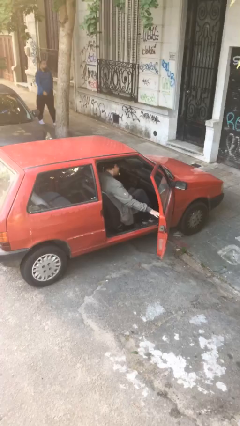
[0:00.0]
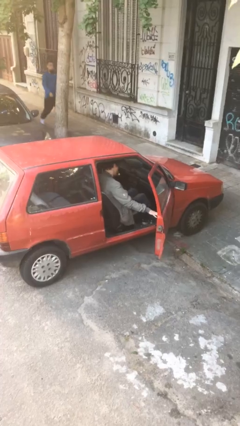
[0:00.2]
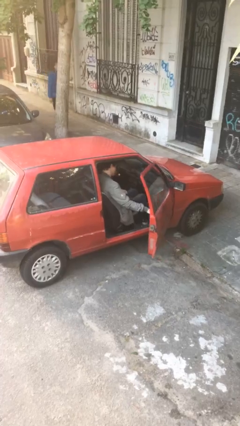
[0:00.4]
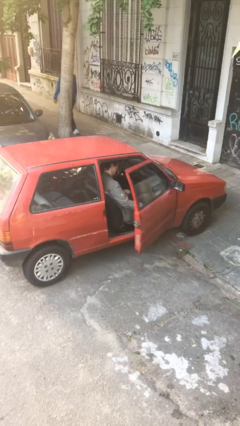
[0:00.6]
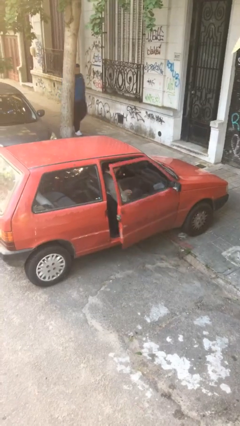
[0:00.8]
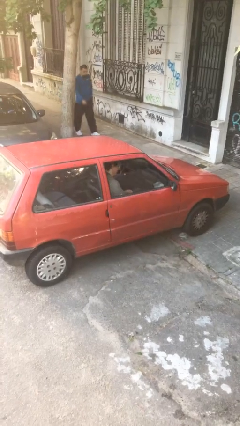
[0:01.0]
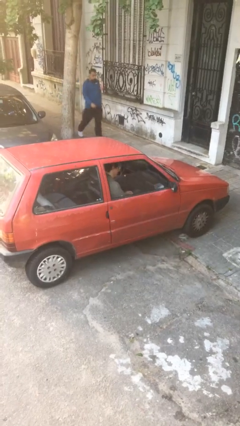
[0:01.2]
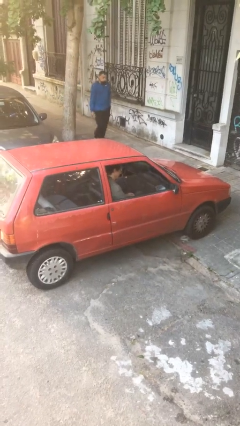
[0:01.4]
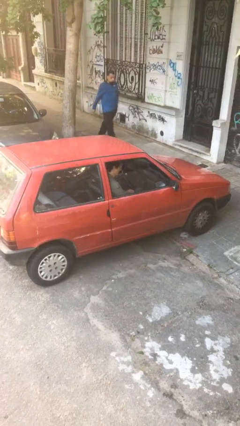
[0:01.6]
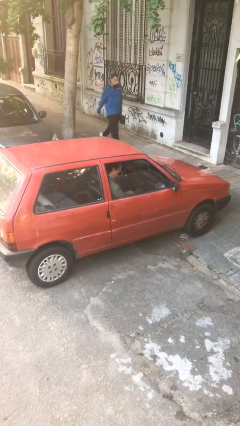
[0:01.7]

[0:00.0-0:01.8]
person closes car door

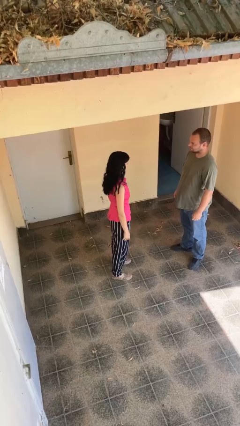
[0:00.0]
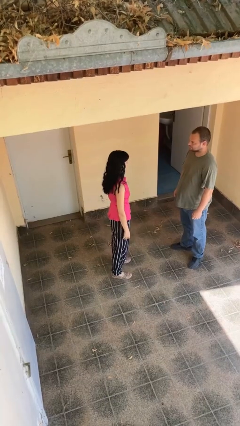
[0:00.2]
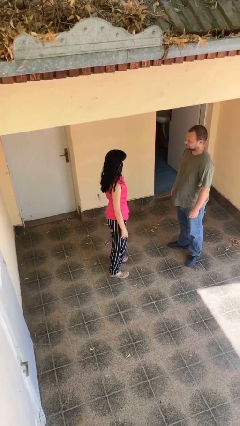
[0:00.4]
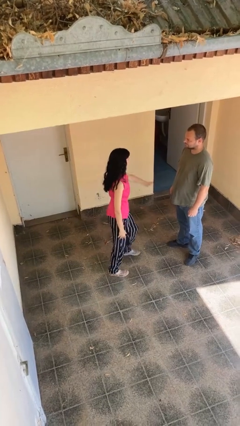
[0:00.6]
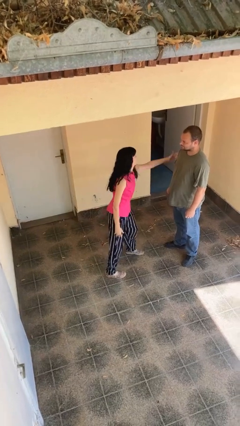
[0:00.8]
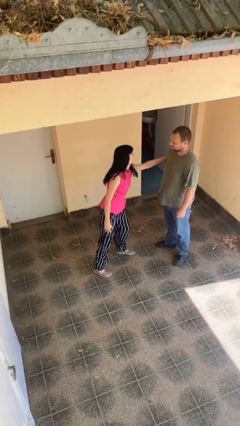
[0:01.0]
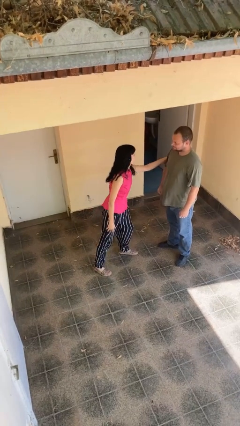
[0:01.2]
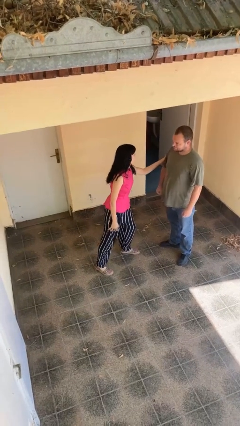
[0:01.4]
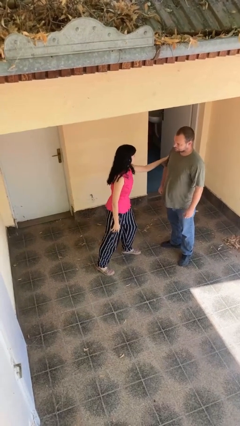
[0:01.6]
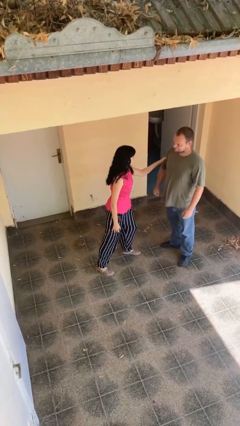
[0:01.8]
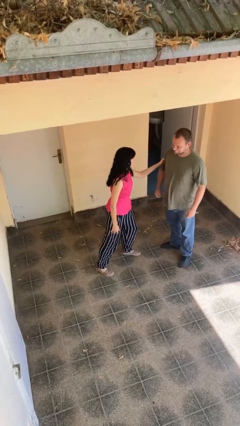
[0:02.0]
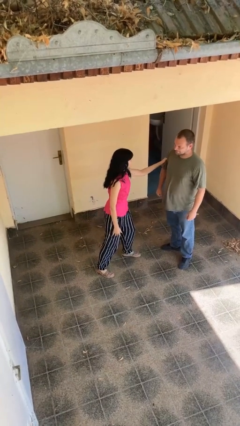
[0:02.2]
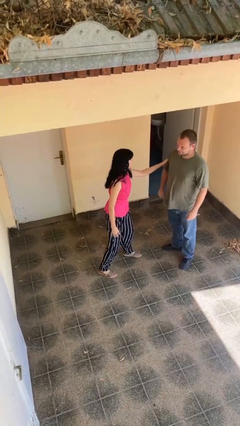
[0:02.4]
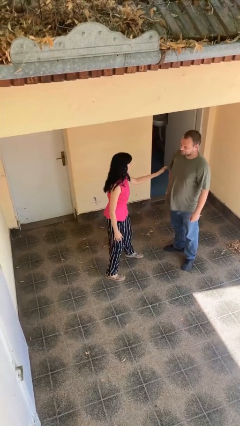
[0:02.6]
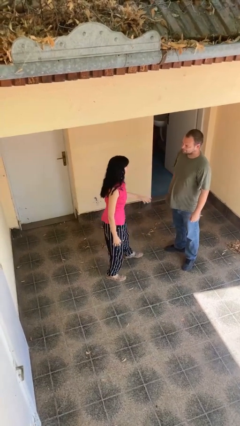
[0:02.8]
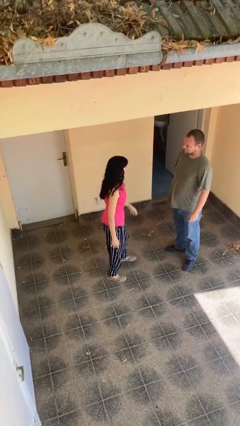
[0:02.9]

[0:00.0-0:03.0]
person grabs person by bicep

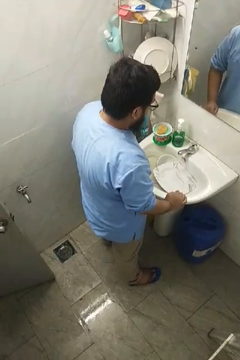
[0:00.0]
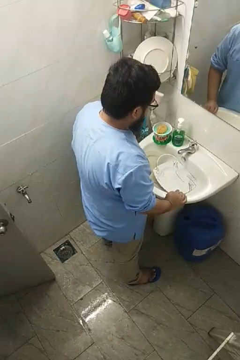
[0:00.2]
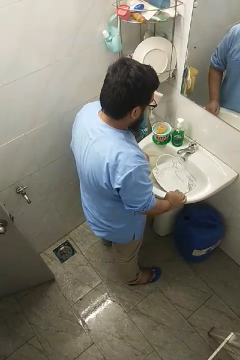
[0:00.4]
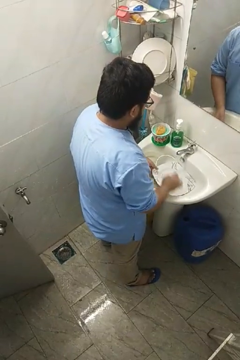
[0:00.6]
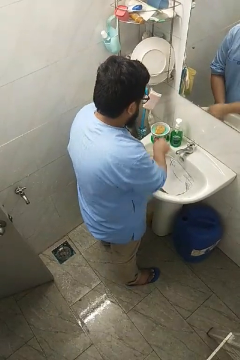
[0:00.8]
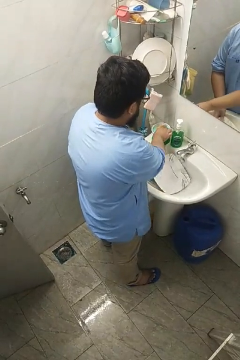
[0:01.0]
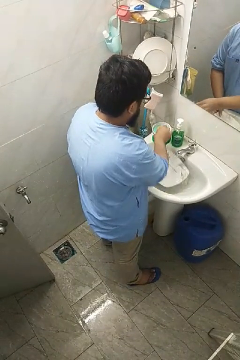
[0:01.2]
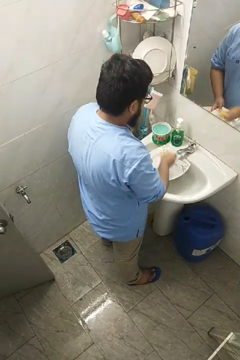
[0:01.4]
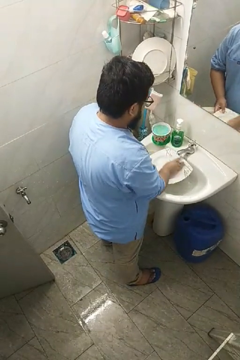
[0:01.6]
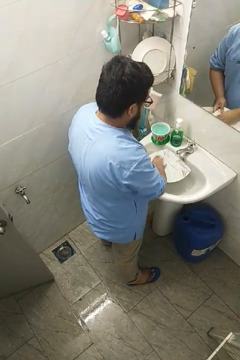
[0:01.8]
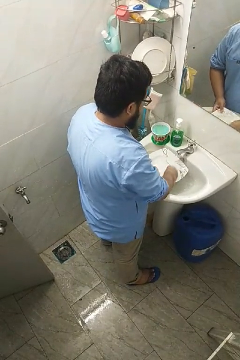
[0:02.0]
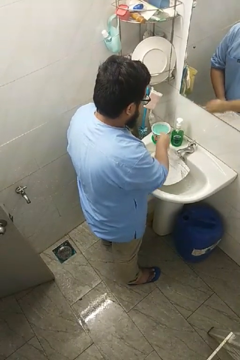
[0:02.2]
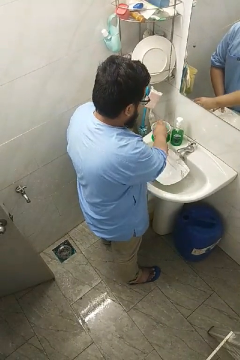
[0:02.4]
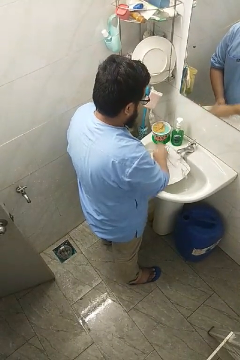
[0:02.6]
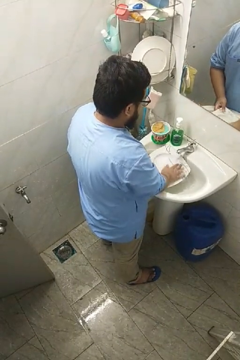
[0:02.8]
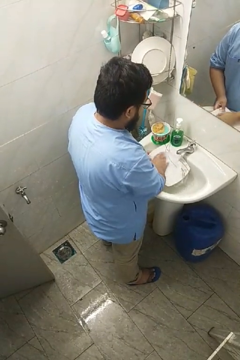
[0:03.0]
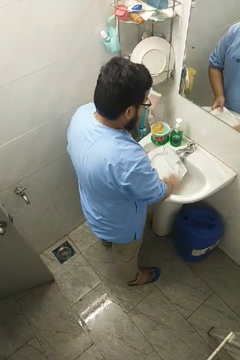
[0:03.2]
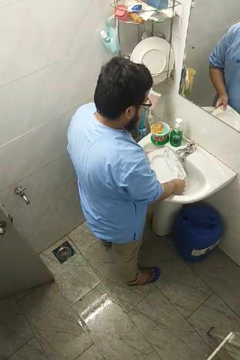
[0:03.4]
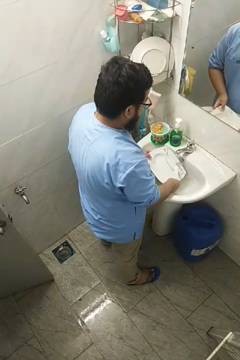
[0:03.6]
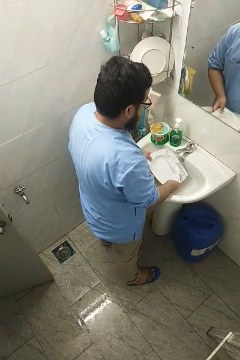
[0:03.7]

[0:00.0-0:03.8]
person washes dish

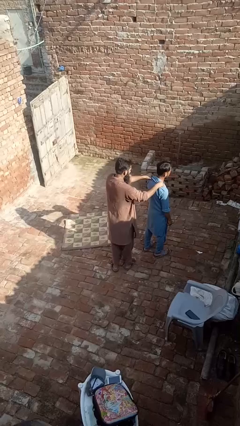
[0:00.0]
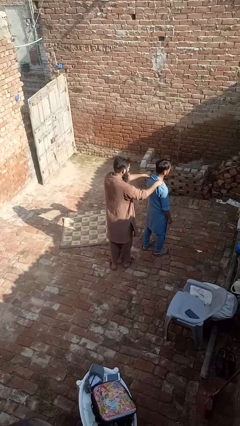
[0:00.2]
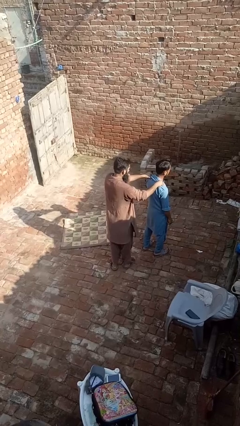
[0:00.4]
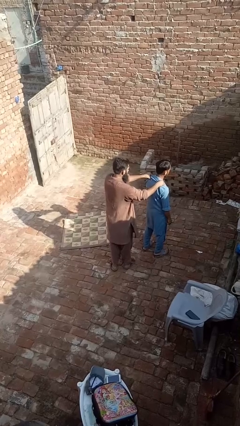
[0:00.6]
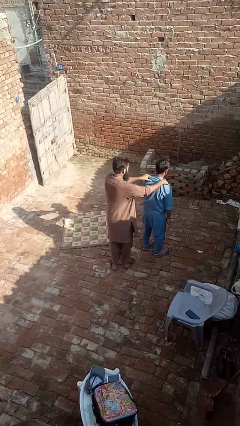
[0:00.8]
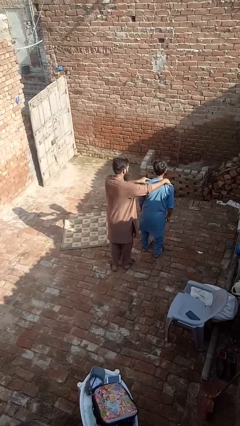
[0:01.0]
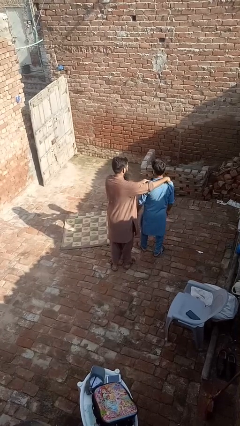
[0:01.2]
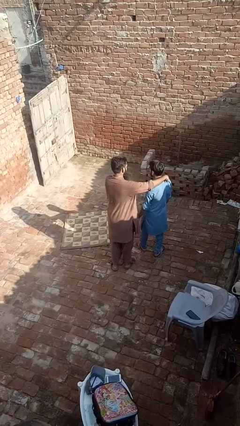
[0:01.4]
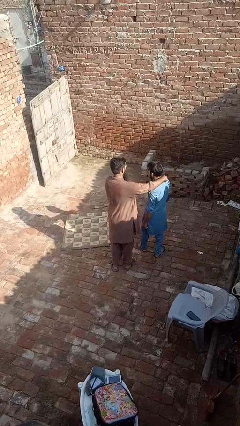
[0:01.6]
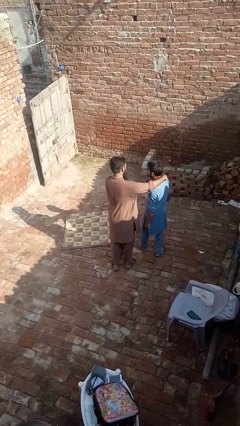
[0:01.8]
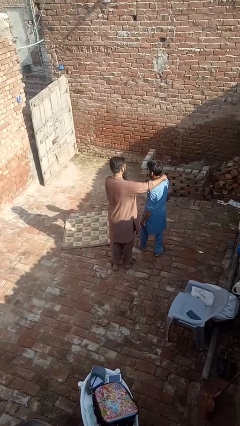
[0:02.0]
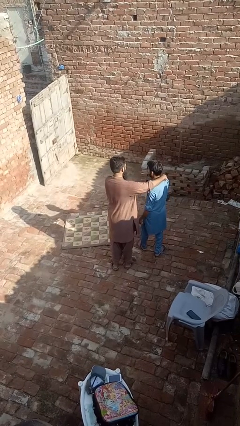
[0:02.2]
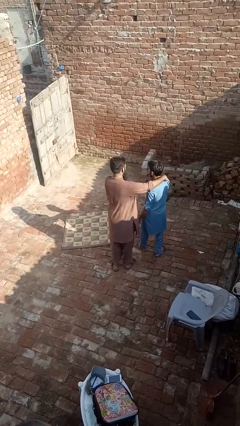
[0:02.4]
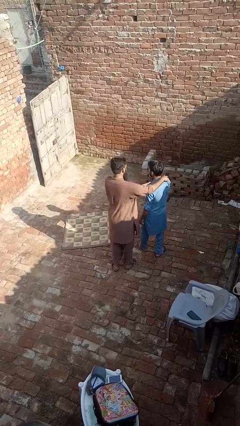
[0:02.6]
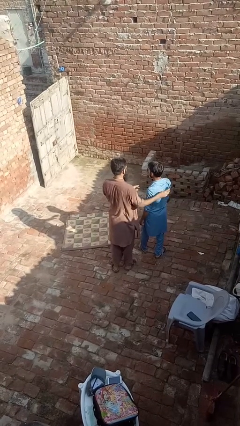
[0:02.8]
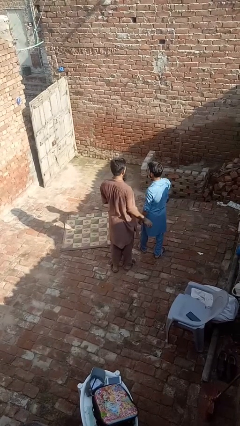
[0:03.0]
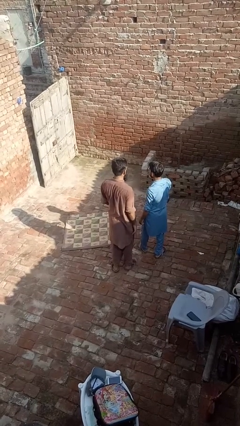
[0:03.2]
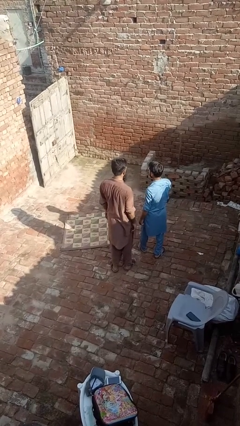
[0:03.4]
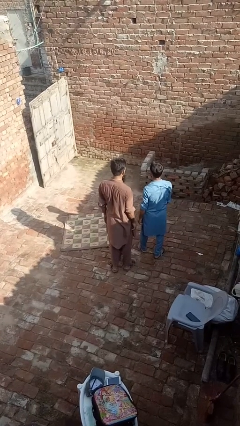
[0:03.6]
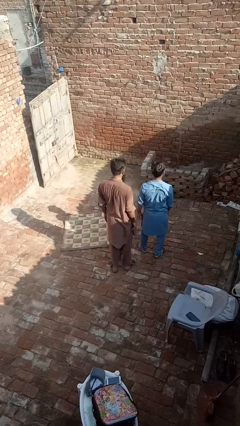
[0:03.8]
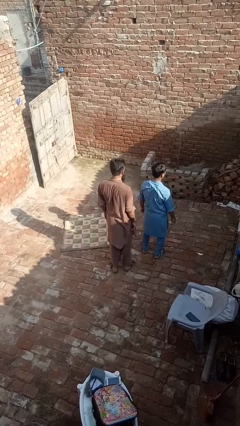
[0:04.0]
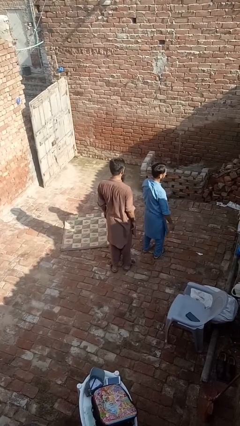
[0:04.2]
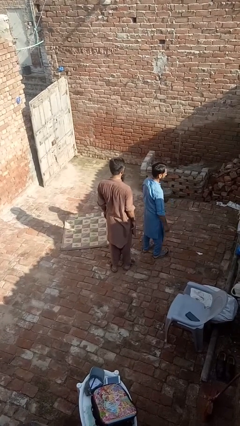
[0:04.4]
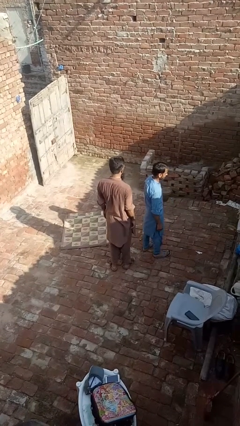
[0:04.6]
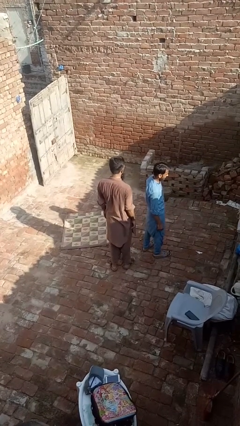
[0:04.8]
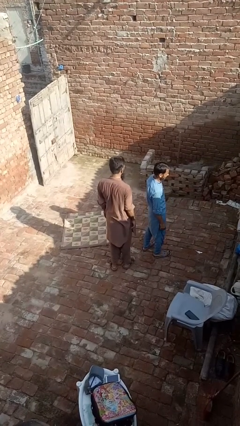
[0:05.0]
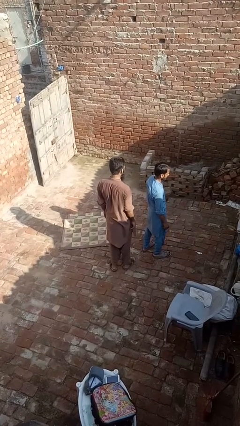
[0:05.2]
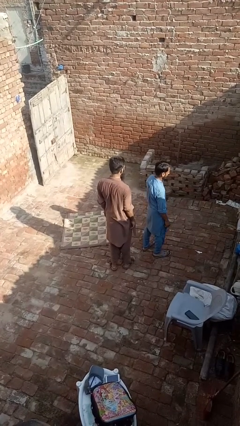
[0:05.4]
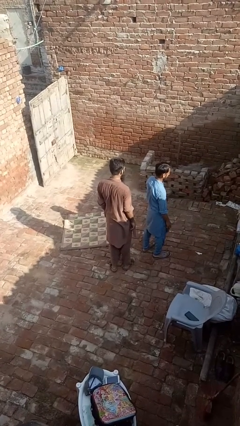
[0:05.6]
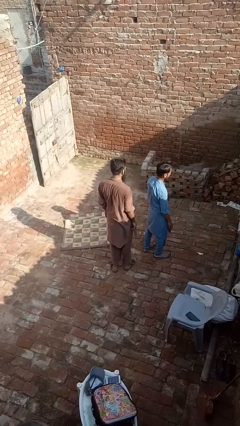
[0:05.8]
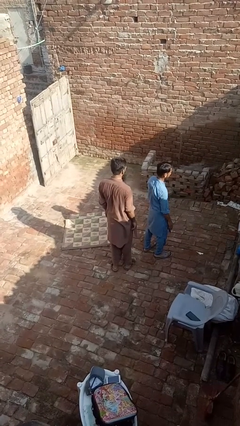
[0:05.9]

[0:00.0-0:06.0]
person spins person around

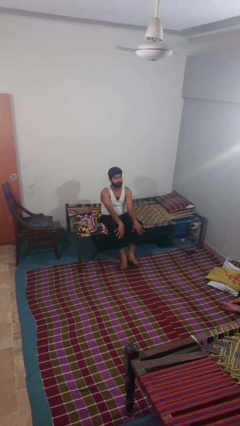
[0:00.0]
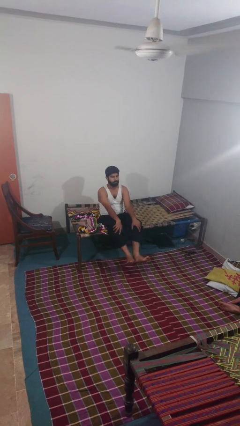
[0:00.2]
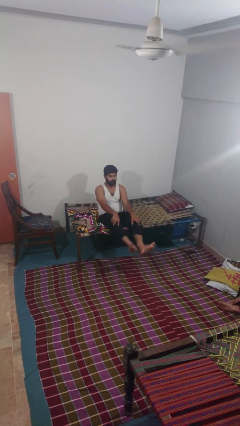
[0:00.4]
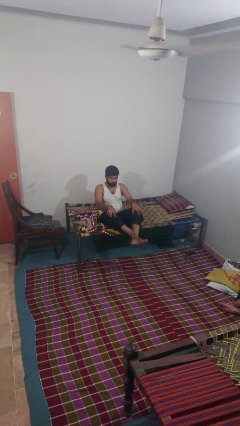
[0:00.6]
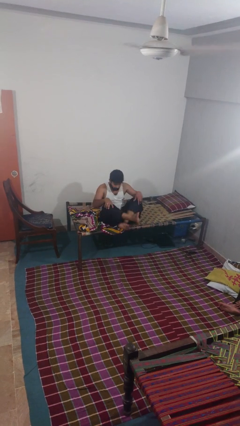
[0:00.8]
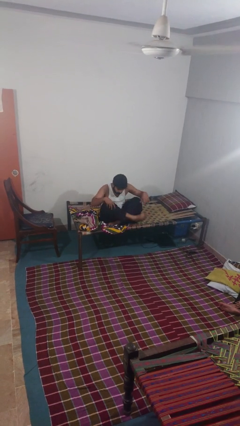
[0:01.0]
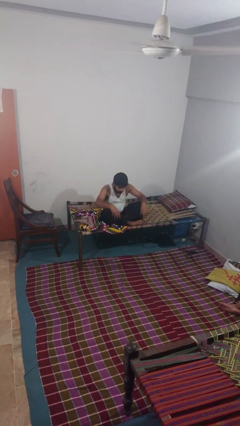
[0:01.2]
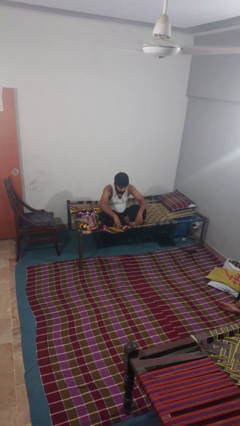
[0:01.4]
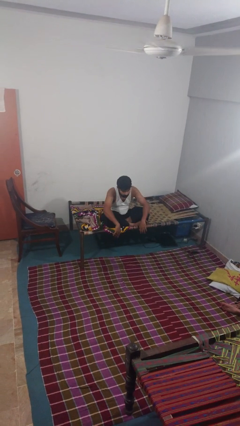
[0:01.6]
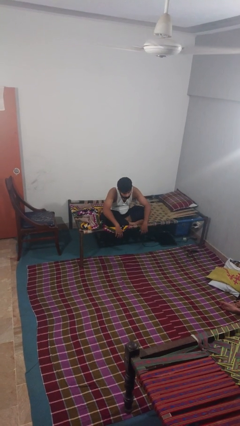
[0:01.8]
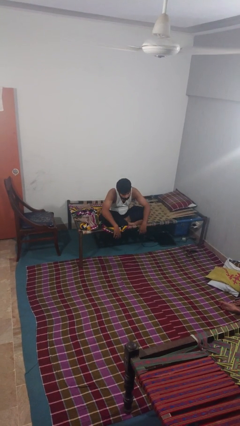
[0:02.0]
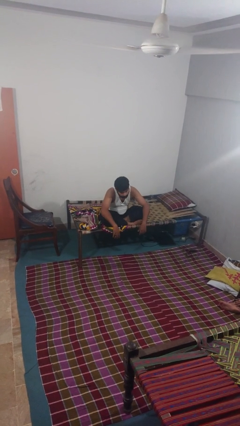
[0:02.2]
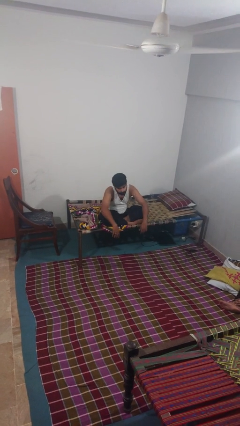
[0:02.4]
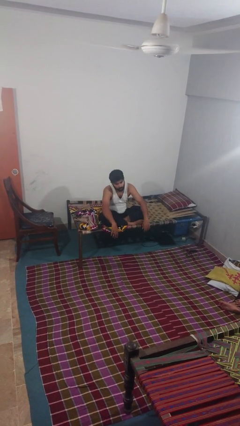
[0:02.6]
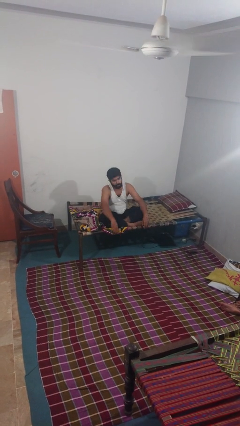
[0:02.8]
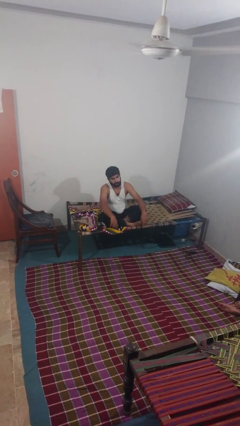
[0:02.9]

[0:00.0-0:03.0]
person crosses legs

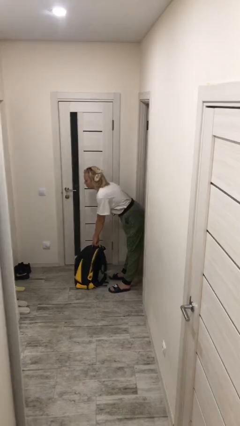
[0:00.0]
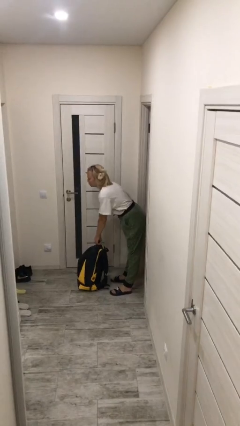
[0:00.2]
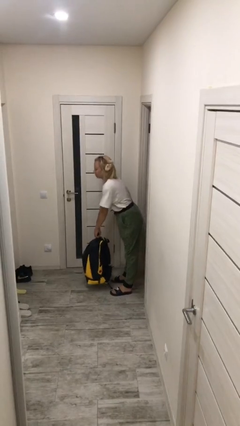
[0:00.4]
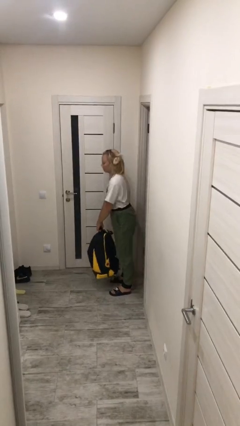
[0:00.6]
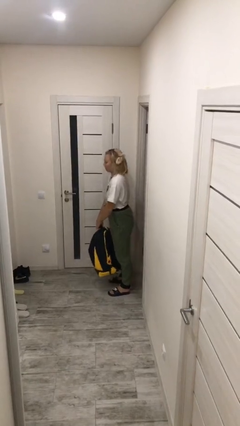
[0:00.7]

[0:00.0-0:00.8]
person picks up object from floor
